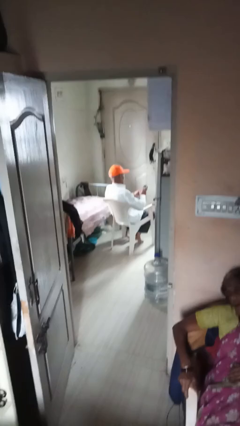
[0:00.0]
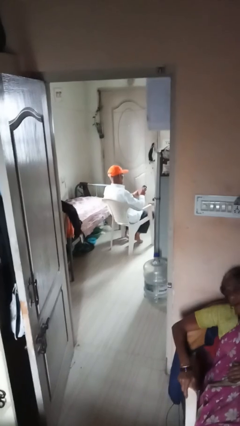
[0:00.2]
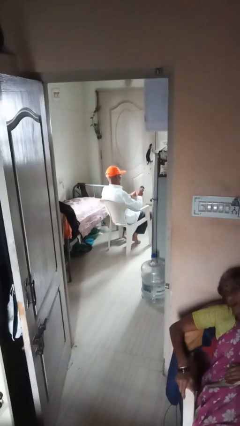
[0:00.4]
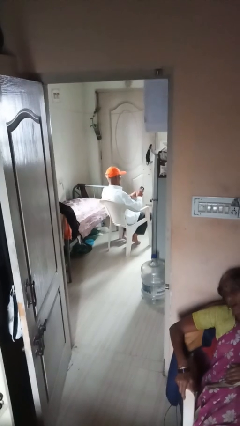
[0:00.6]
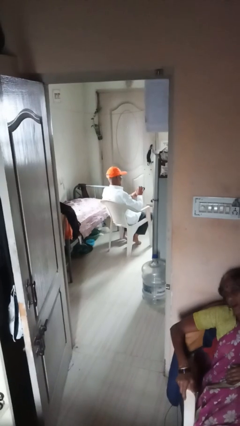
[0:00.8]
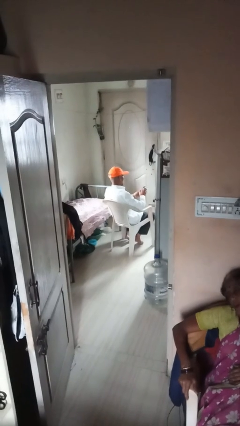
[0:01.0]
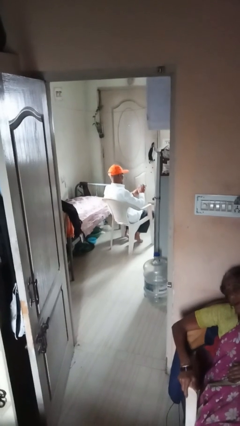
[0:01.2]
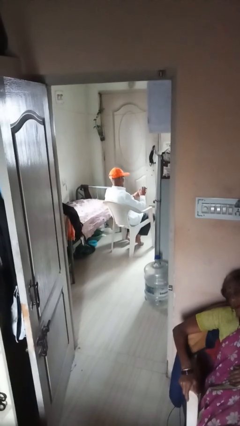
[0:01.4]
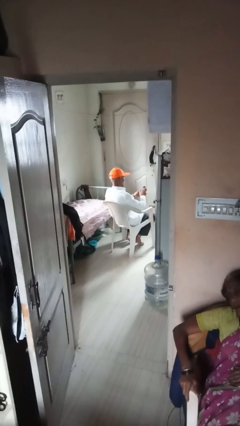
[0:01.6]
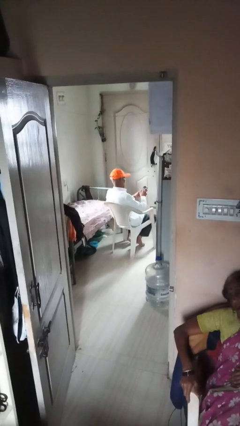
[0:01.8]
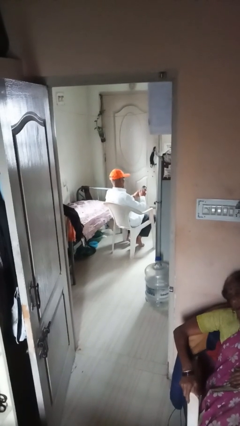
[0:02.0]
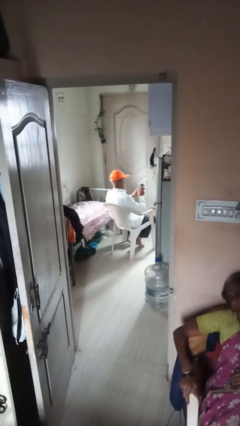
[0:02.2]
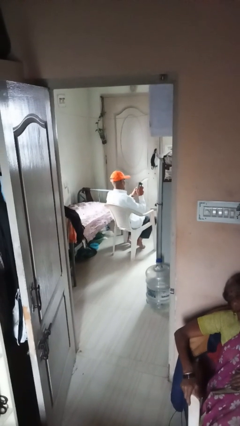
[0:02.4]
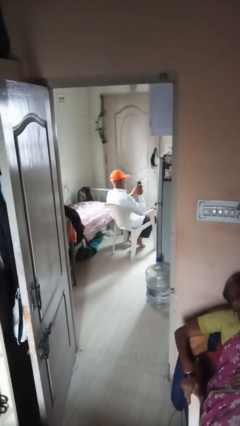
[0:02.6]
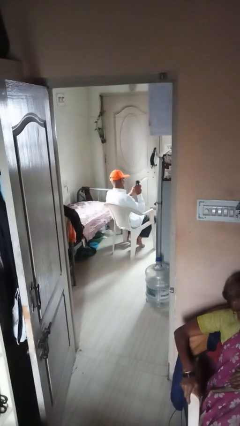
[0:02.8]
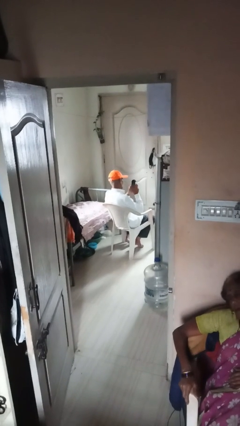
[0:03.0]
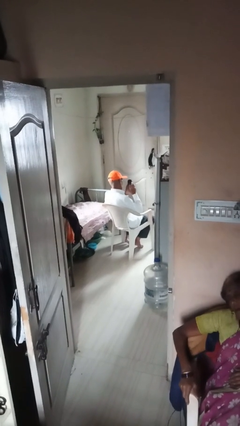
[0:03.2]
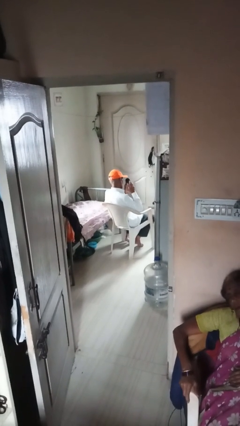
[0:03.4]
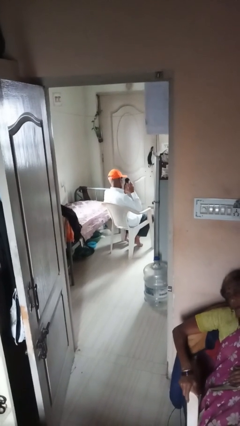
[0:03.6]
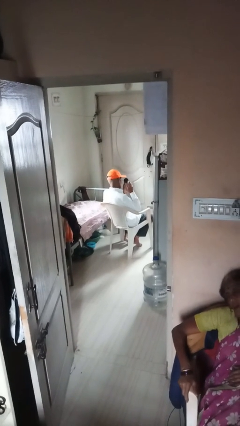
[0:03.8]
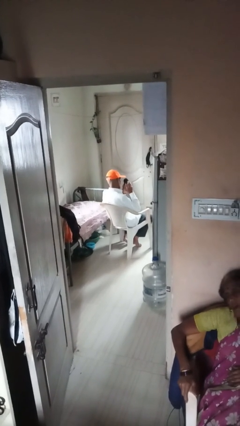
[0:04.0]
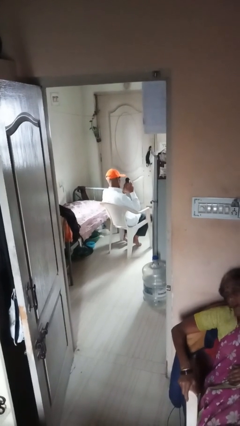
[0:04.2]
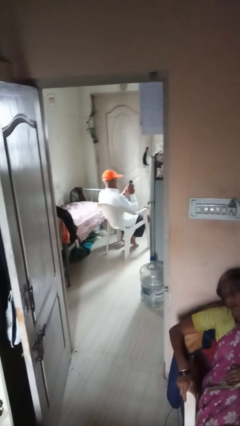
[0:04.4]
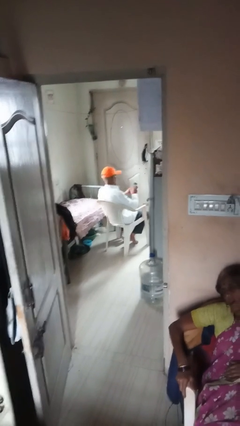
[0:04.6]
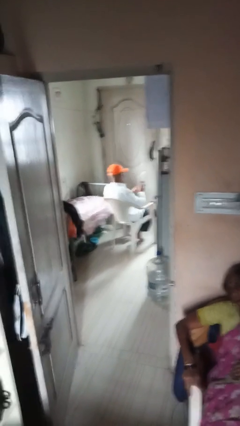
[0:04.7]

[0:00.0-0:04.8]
person taps object with finger

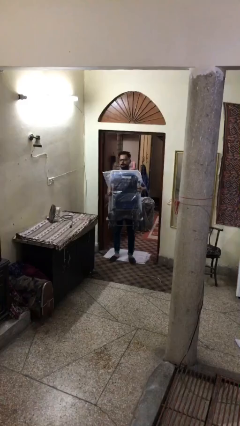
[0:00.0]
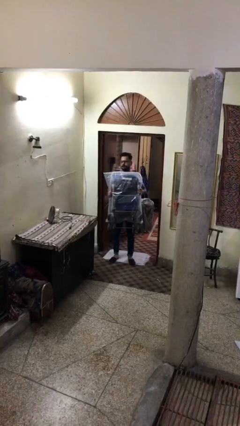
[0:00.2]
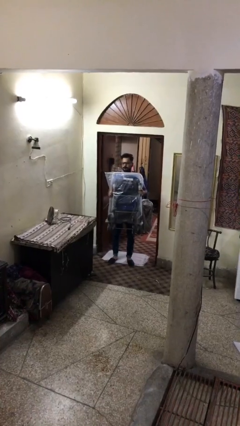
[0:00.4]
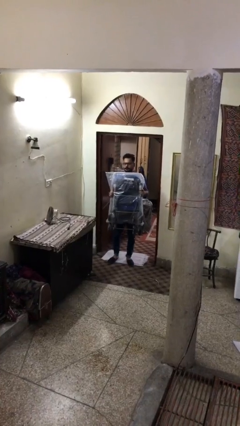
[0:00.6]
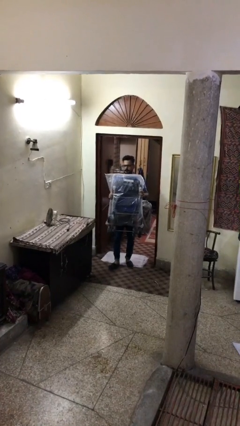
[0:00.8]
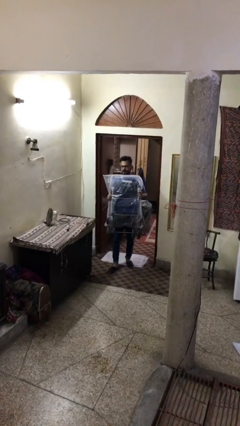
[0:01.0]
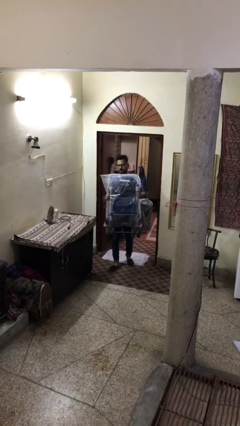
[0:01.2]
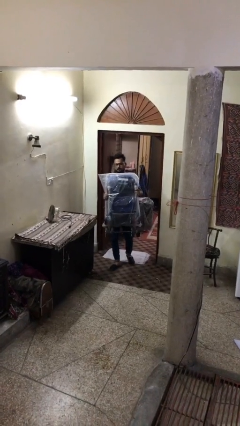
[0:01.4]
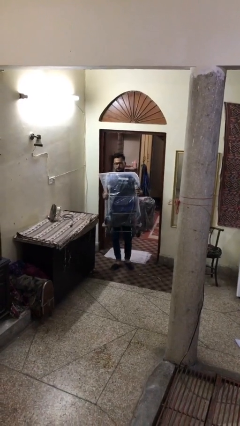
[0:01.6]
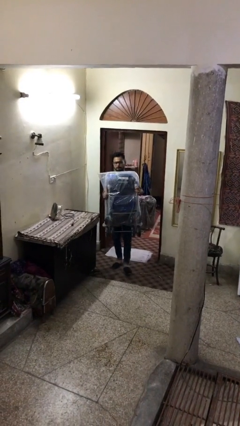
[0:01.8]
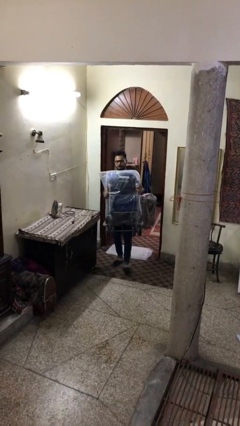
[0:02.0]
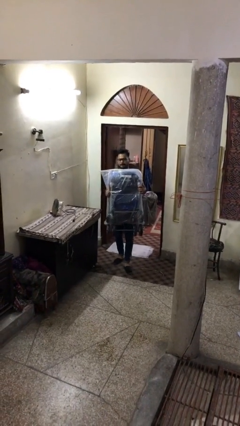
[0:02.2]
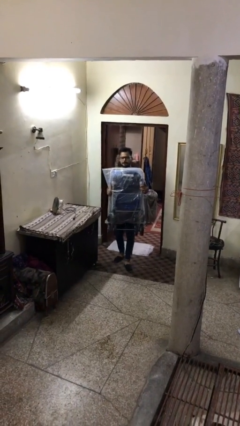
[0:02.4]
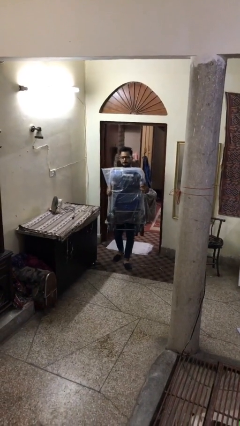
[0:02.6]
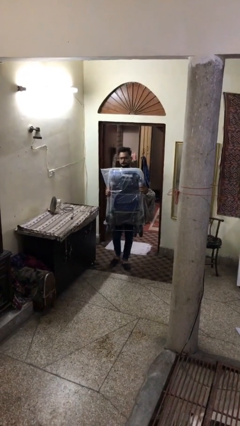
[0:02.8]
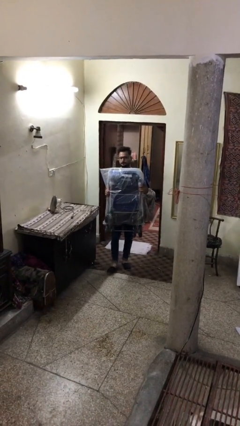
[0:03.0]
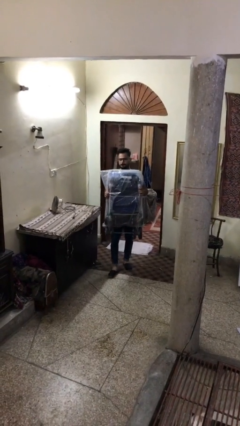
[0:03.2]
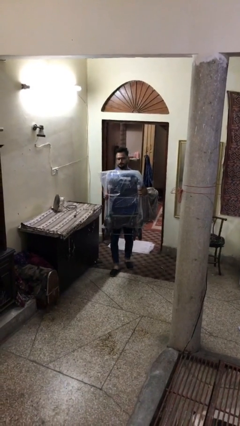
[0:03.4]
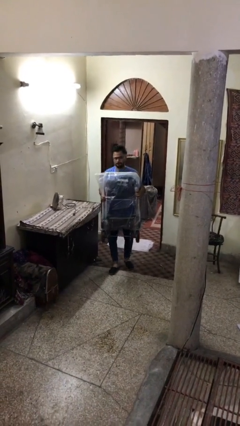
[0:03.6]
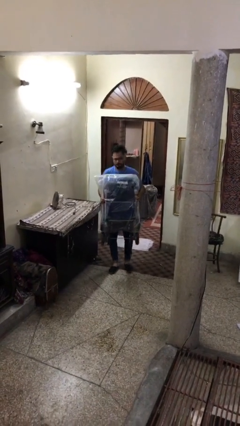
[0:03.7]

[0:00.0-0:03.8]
person carries heavy object

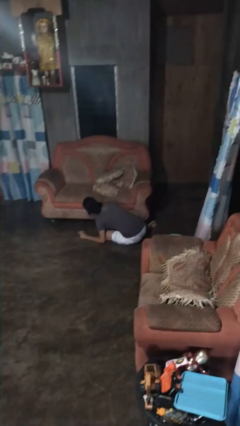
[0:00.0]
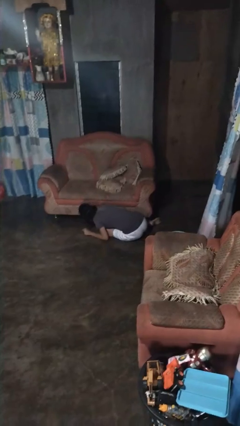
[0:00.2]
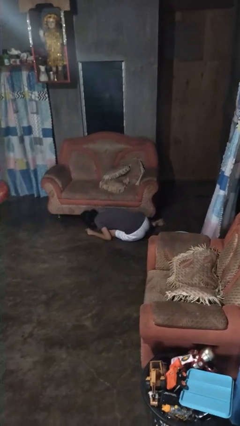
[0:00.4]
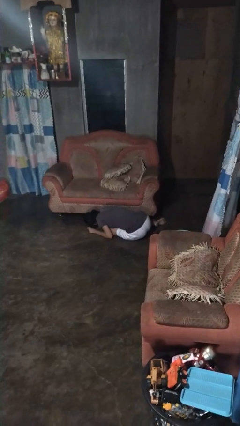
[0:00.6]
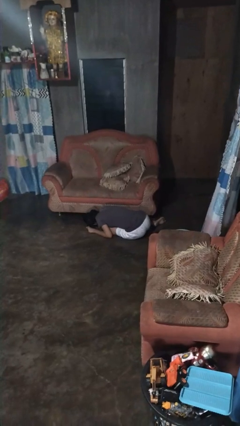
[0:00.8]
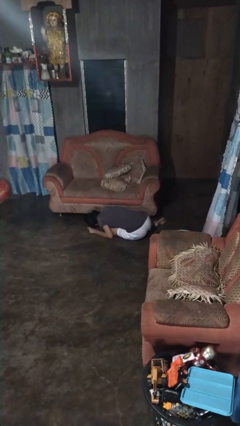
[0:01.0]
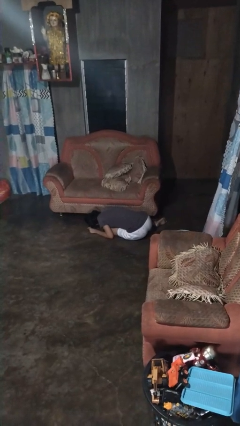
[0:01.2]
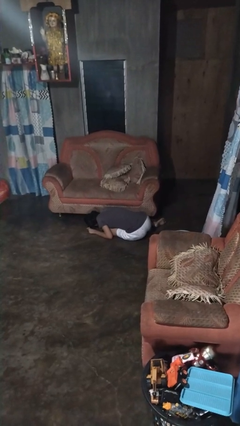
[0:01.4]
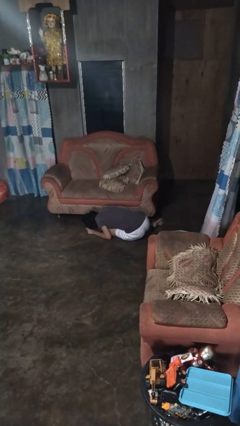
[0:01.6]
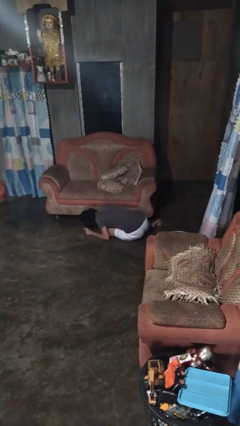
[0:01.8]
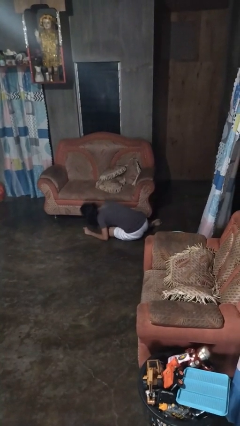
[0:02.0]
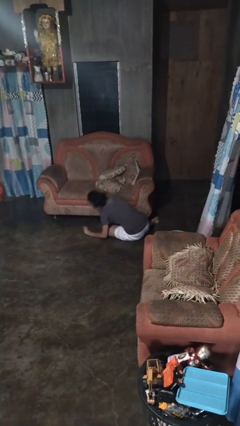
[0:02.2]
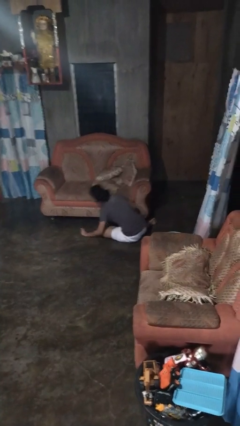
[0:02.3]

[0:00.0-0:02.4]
person searches under couch

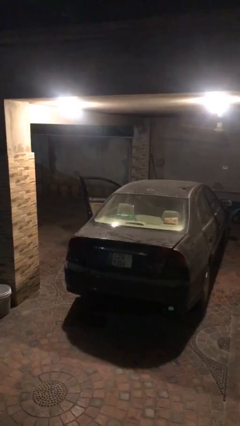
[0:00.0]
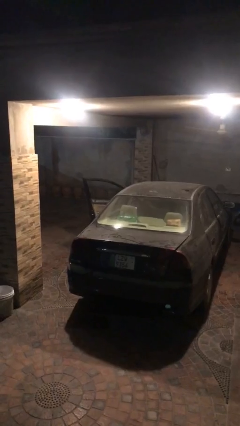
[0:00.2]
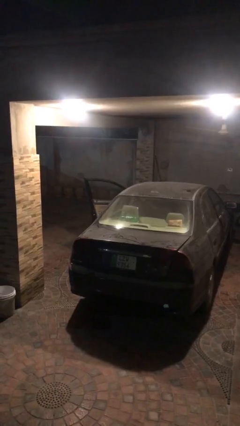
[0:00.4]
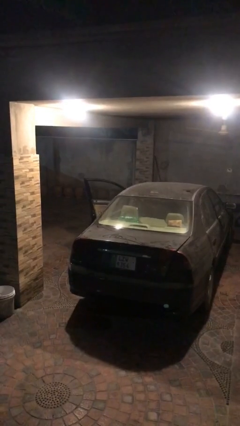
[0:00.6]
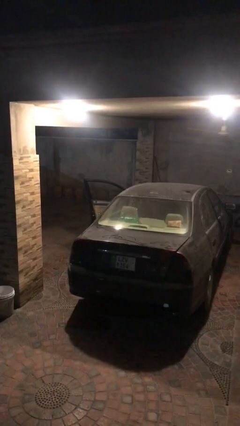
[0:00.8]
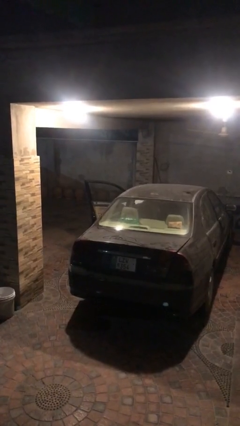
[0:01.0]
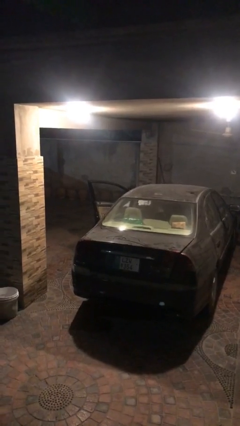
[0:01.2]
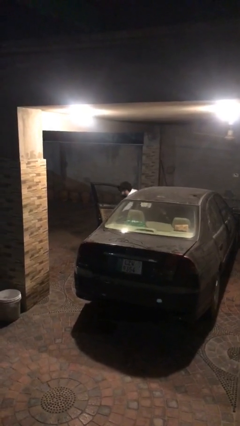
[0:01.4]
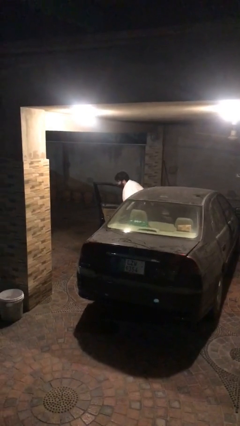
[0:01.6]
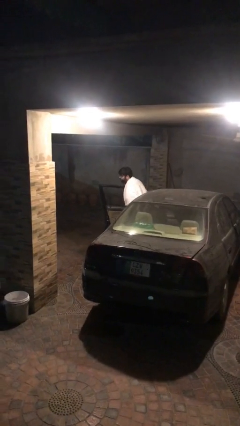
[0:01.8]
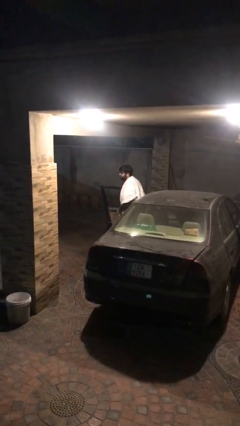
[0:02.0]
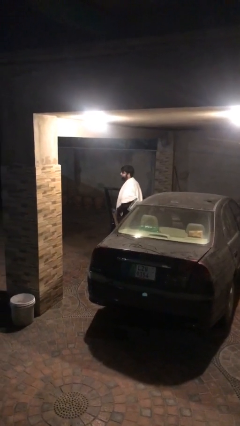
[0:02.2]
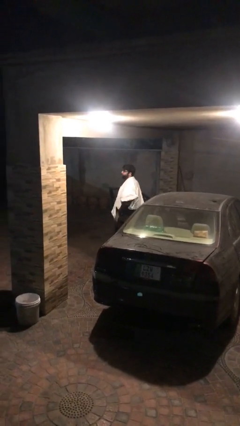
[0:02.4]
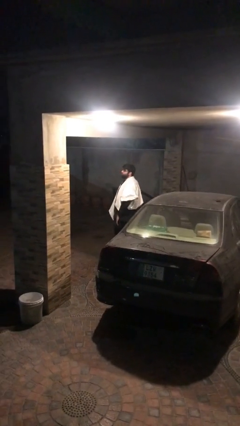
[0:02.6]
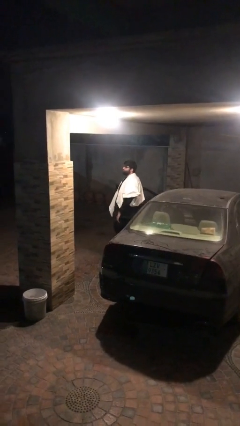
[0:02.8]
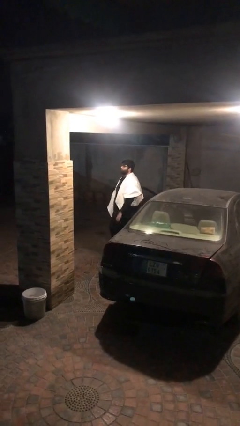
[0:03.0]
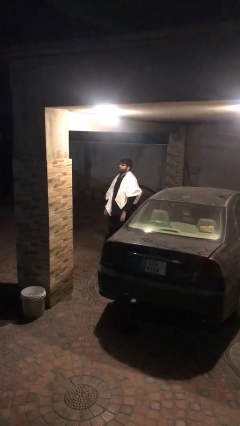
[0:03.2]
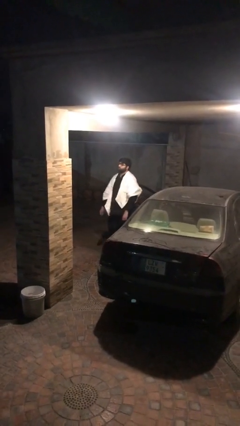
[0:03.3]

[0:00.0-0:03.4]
person exits car

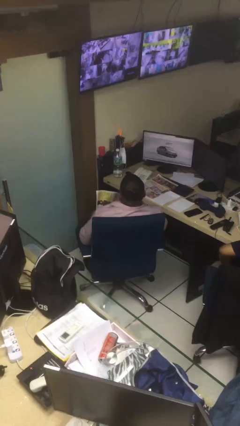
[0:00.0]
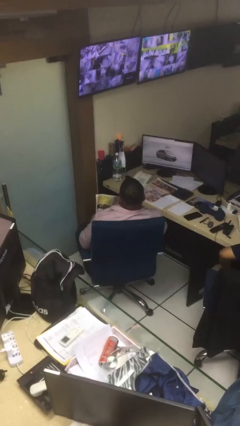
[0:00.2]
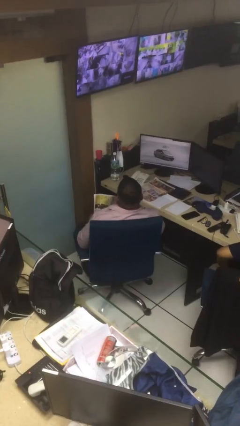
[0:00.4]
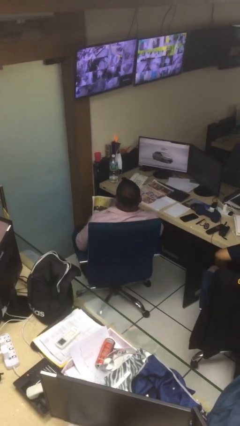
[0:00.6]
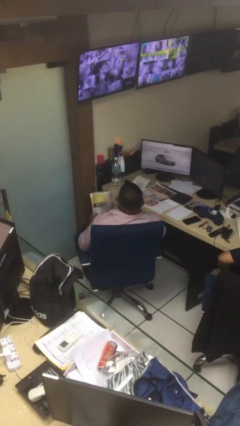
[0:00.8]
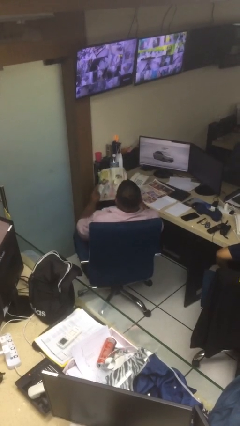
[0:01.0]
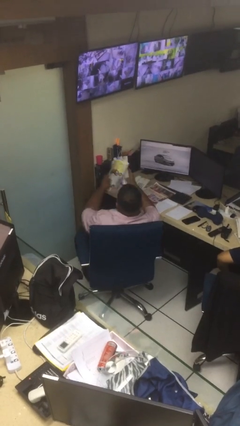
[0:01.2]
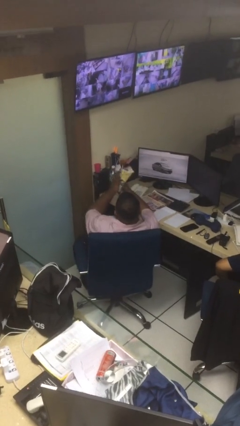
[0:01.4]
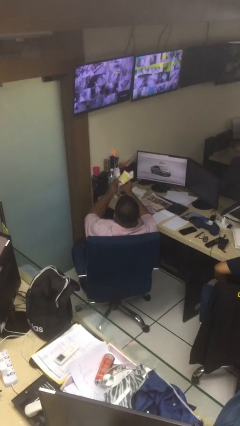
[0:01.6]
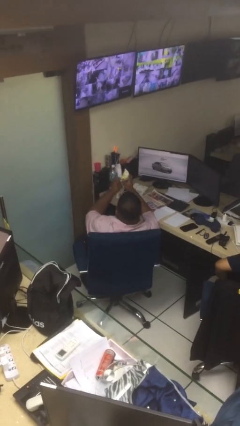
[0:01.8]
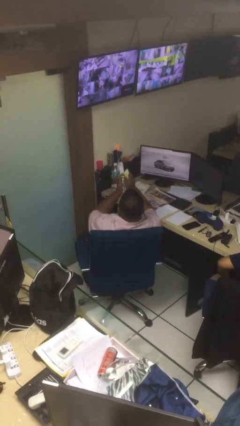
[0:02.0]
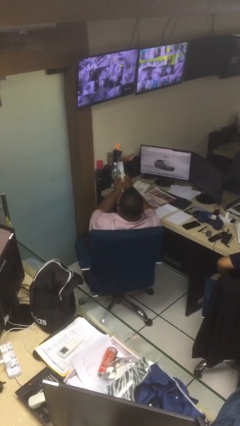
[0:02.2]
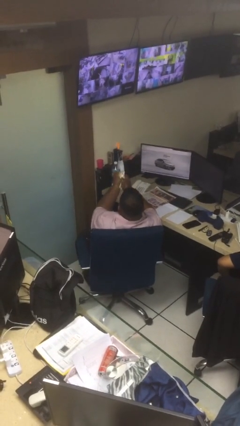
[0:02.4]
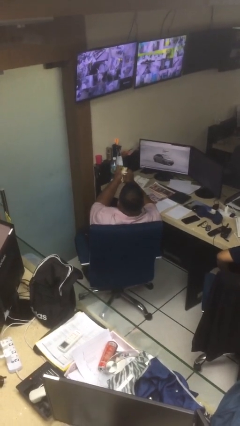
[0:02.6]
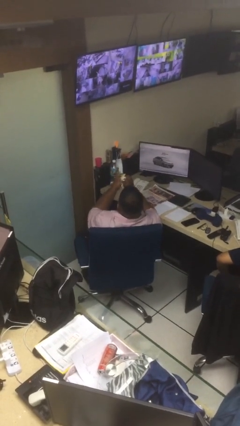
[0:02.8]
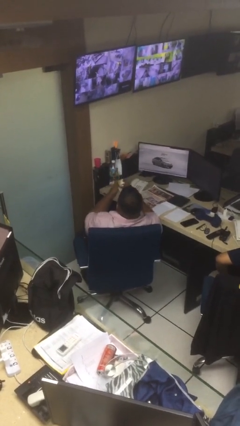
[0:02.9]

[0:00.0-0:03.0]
person crumples paper
